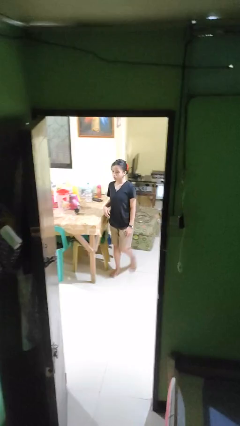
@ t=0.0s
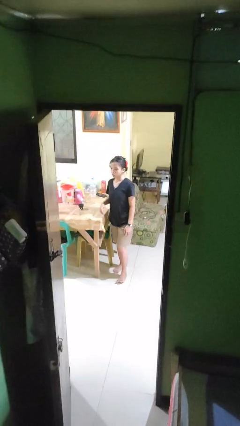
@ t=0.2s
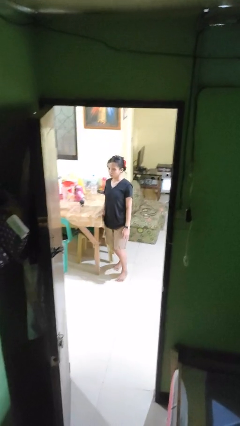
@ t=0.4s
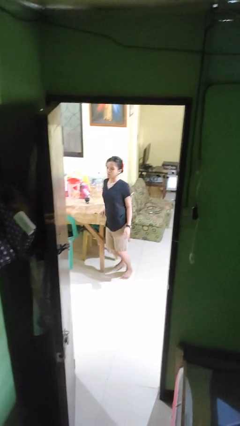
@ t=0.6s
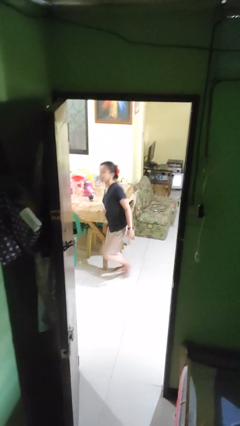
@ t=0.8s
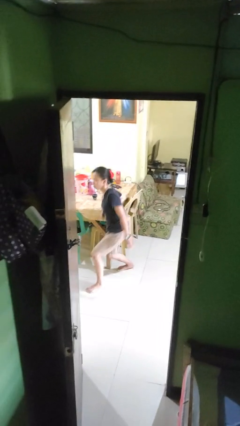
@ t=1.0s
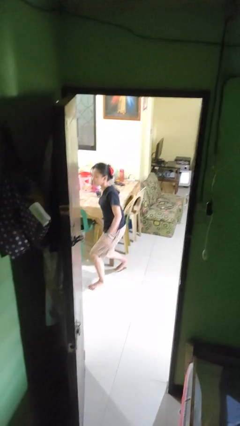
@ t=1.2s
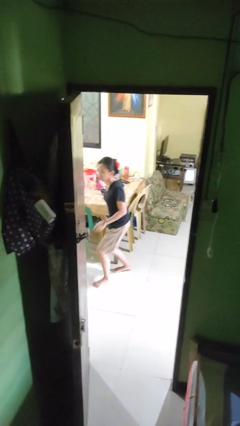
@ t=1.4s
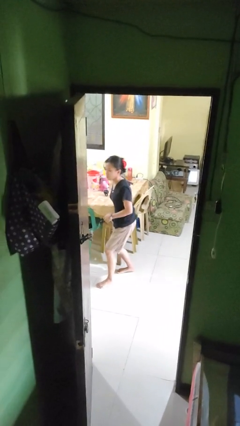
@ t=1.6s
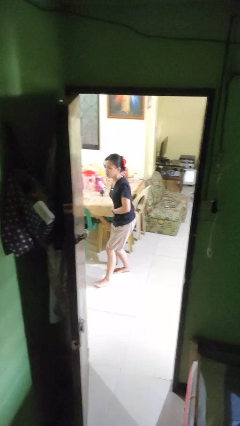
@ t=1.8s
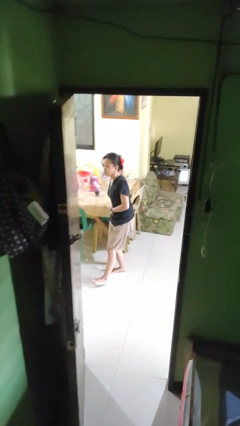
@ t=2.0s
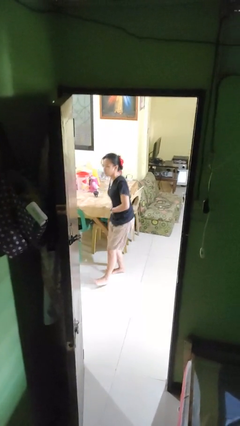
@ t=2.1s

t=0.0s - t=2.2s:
person bumps into table

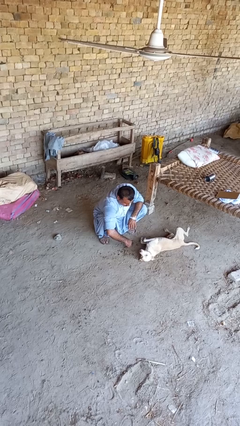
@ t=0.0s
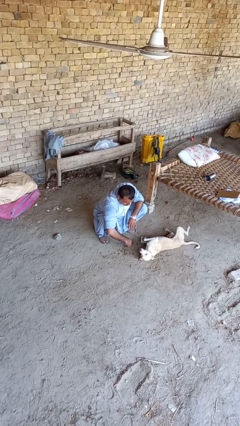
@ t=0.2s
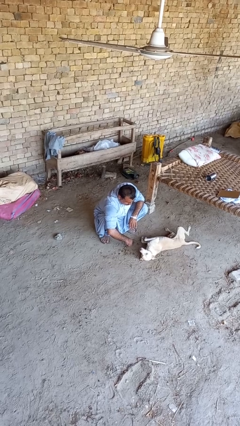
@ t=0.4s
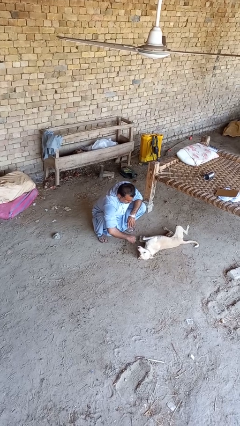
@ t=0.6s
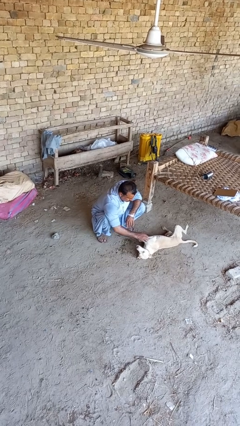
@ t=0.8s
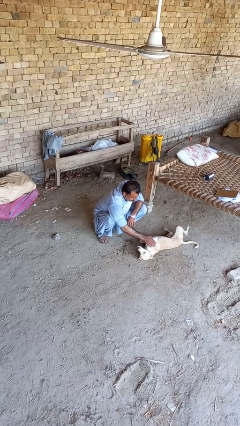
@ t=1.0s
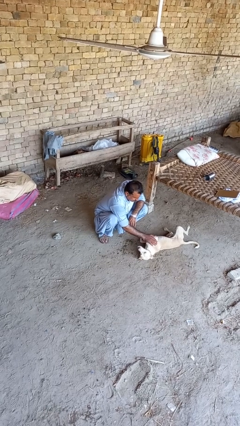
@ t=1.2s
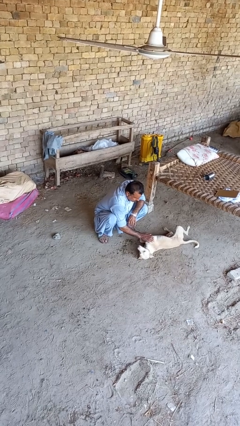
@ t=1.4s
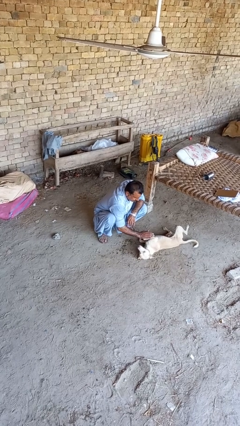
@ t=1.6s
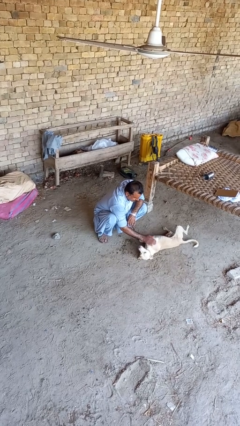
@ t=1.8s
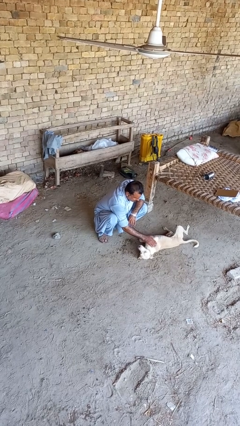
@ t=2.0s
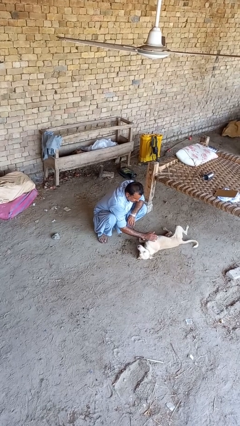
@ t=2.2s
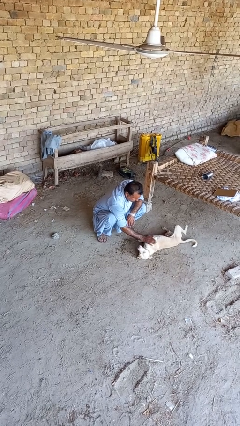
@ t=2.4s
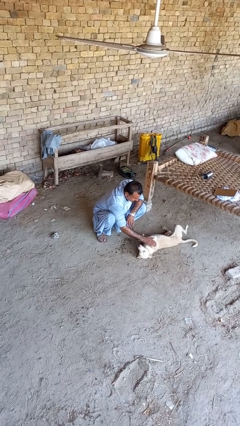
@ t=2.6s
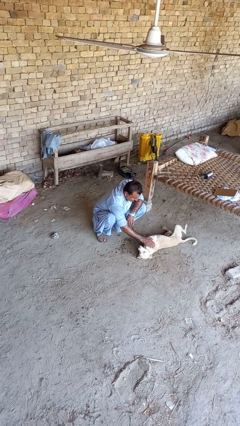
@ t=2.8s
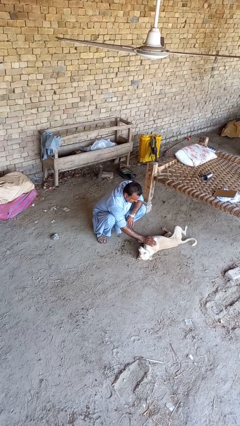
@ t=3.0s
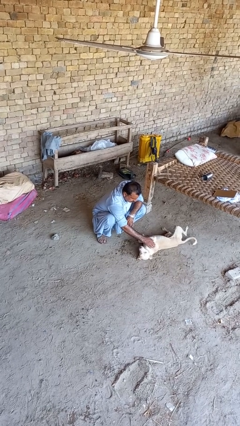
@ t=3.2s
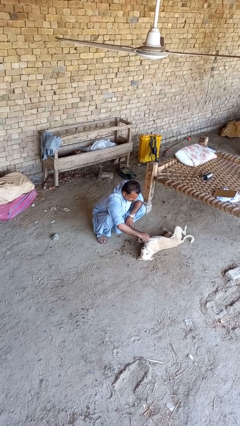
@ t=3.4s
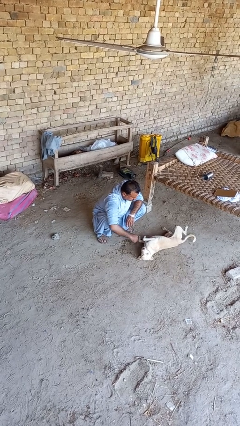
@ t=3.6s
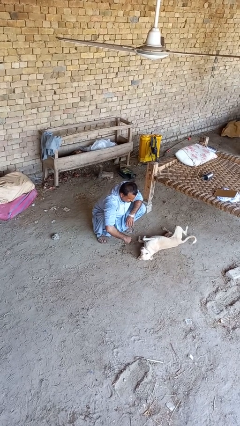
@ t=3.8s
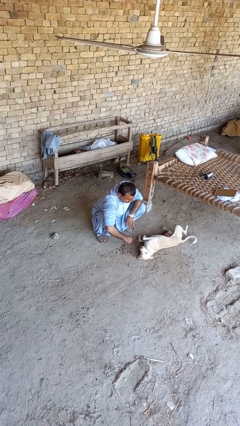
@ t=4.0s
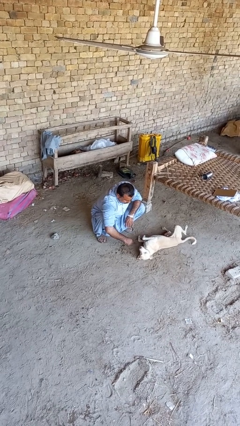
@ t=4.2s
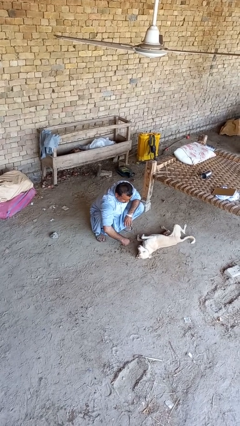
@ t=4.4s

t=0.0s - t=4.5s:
person pets dog

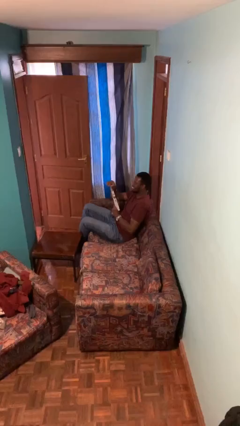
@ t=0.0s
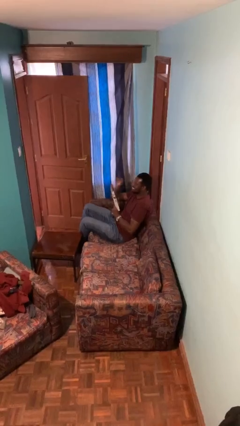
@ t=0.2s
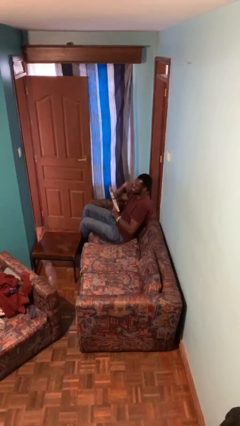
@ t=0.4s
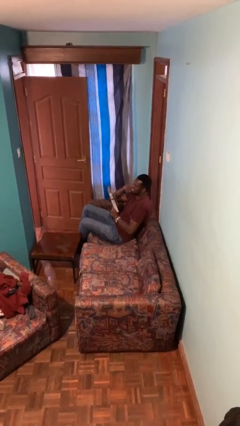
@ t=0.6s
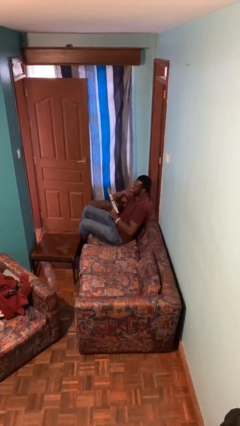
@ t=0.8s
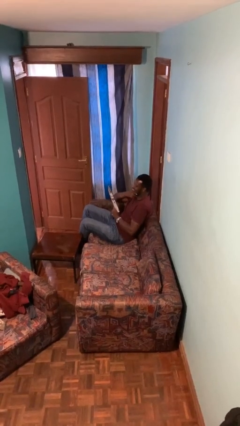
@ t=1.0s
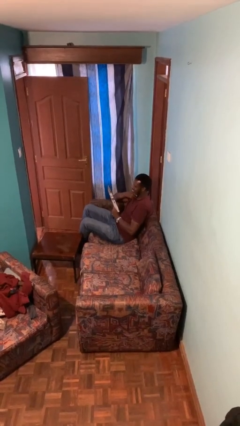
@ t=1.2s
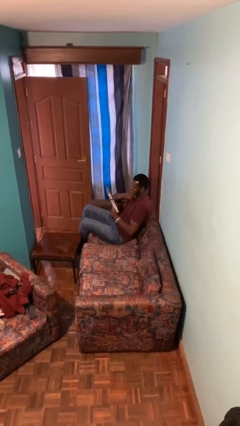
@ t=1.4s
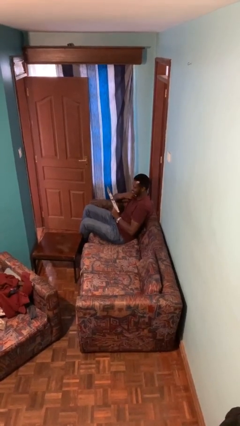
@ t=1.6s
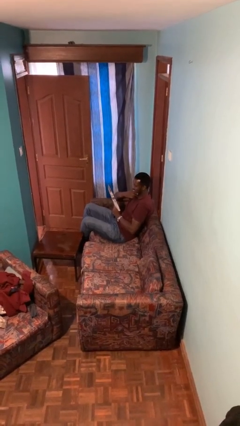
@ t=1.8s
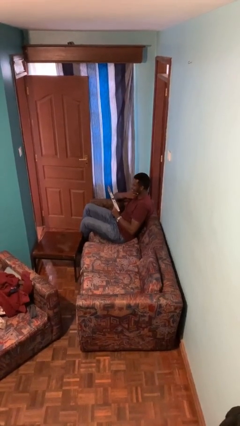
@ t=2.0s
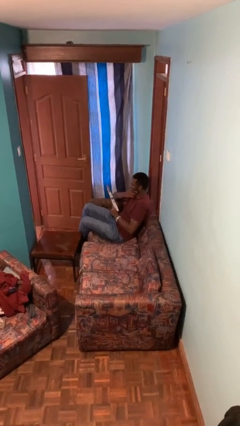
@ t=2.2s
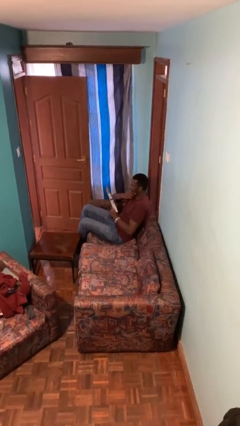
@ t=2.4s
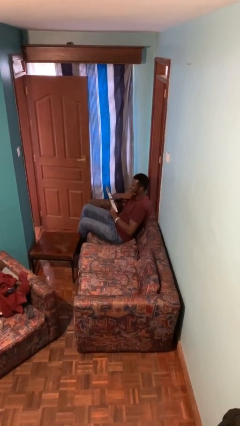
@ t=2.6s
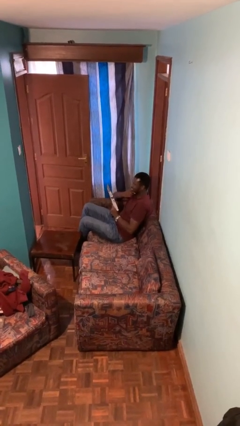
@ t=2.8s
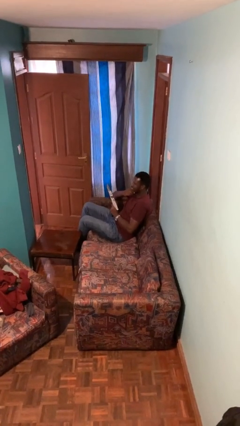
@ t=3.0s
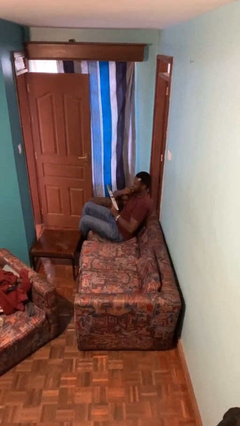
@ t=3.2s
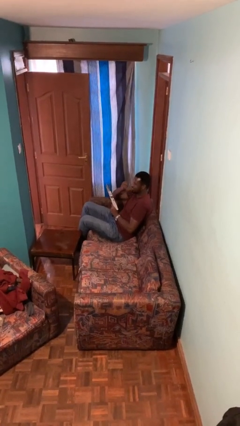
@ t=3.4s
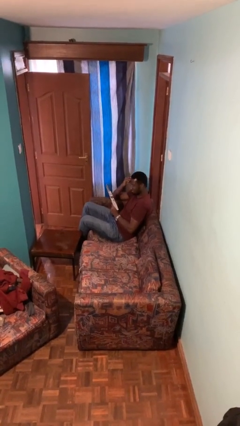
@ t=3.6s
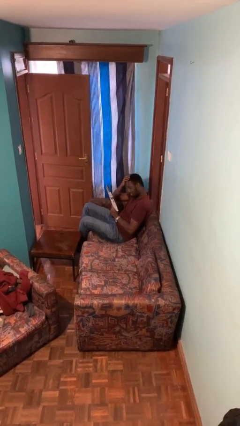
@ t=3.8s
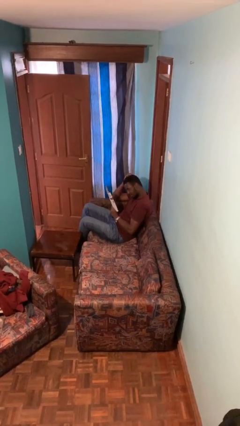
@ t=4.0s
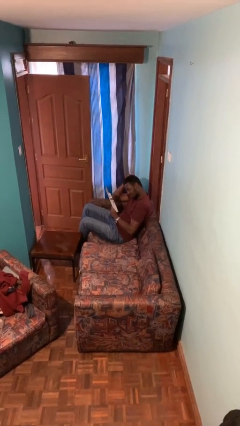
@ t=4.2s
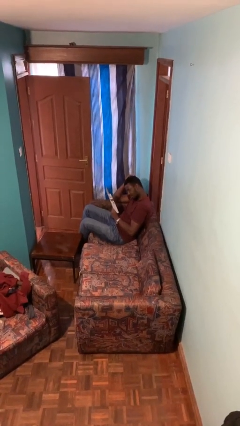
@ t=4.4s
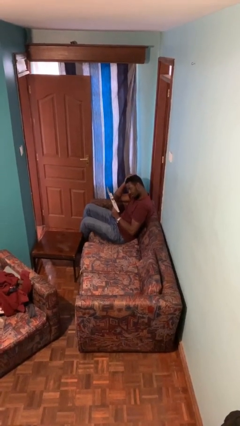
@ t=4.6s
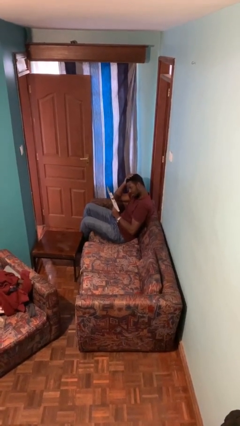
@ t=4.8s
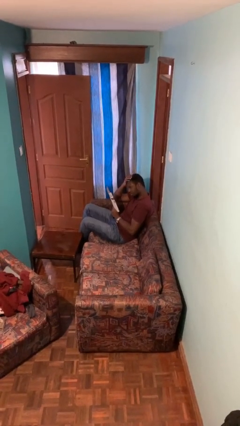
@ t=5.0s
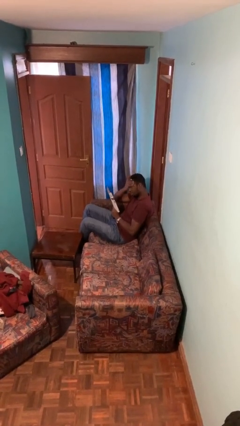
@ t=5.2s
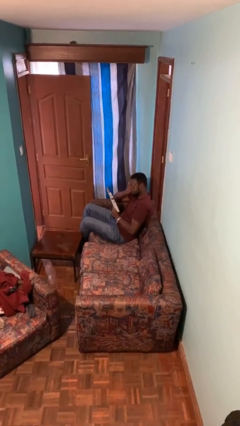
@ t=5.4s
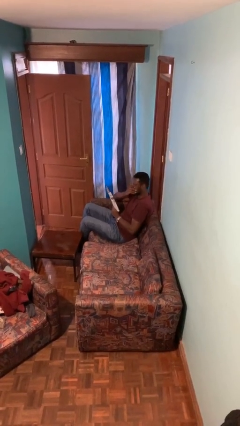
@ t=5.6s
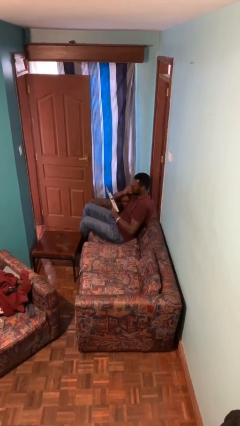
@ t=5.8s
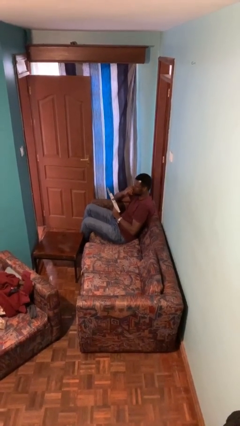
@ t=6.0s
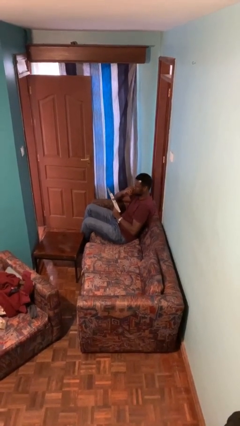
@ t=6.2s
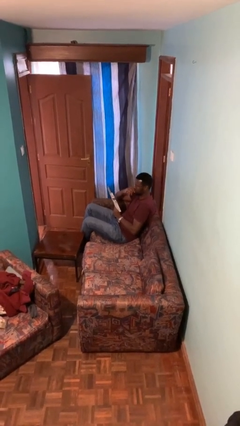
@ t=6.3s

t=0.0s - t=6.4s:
person reads document

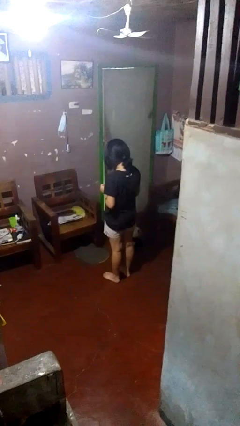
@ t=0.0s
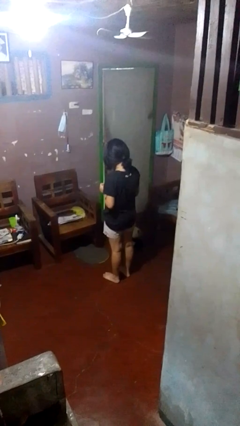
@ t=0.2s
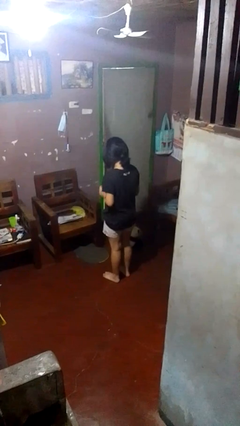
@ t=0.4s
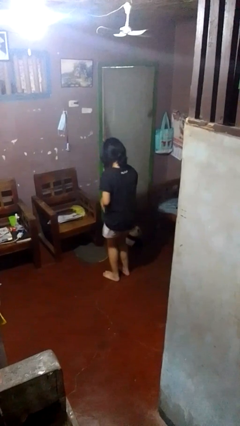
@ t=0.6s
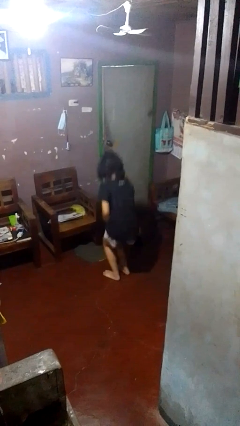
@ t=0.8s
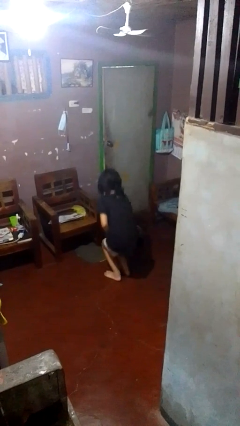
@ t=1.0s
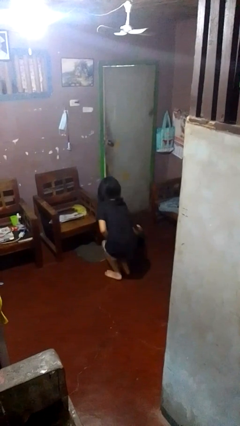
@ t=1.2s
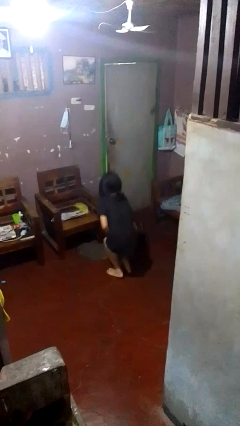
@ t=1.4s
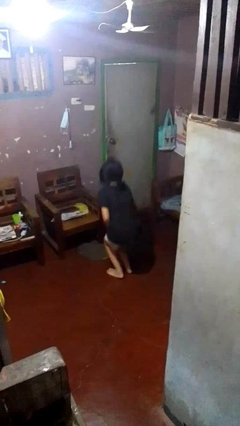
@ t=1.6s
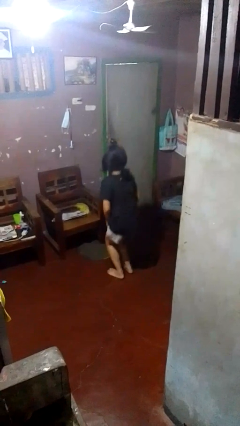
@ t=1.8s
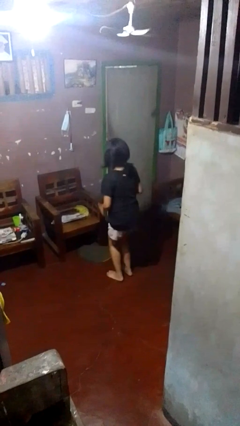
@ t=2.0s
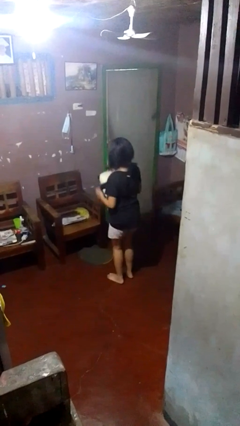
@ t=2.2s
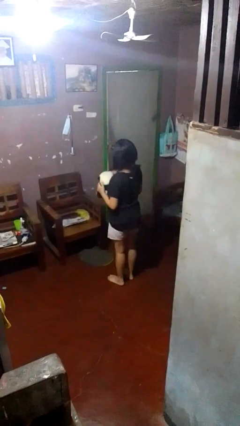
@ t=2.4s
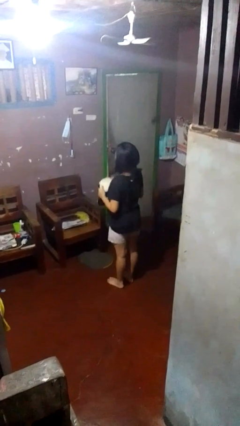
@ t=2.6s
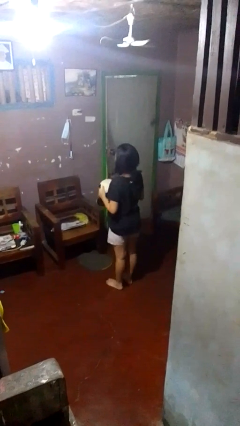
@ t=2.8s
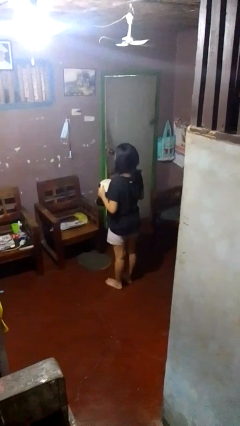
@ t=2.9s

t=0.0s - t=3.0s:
person picks up object from floor

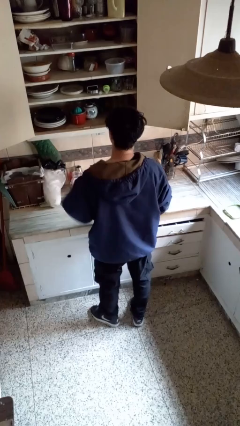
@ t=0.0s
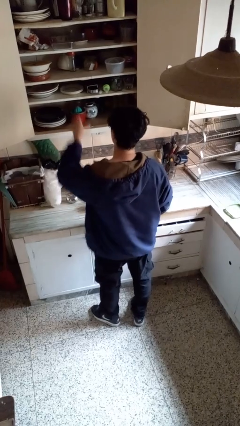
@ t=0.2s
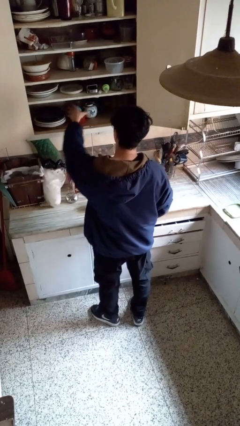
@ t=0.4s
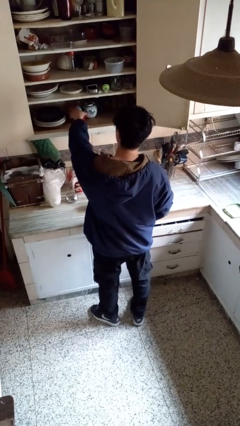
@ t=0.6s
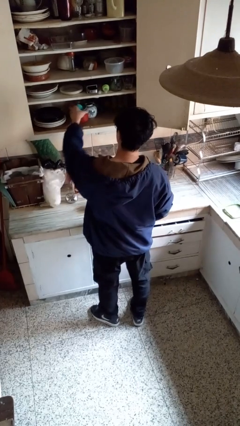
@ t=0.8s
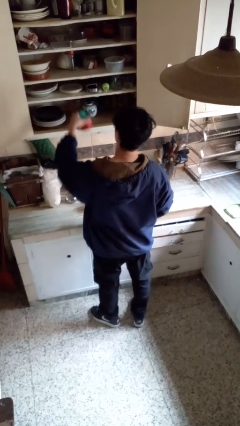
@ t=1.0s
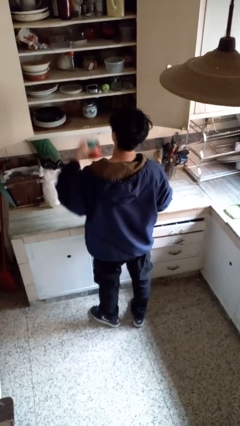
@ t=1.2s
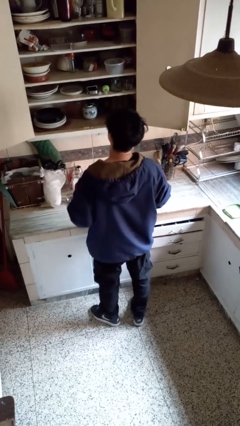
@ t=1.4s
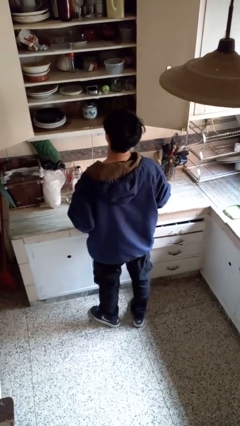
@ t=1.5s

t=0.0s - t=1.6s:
person takes object from cabinet
